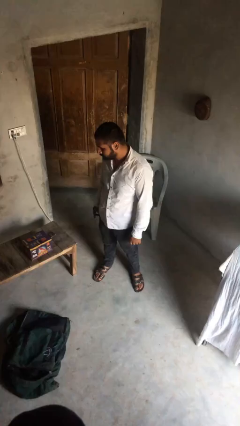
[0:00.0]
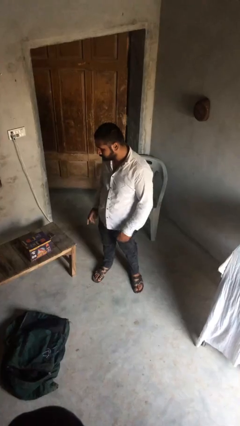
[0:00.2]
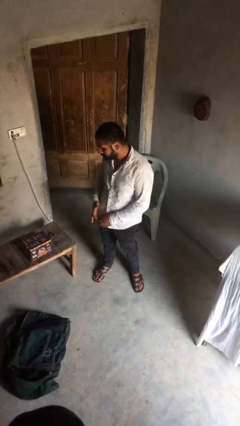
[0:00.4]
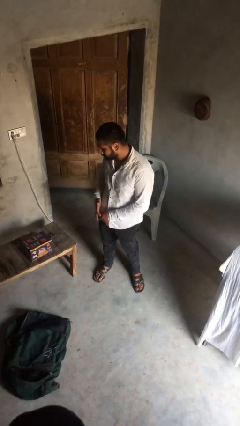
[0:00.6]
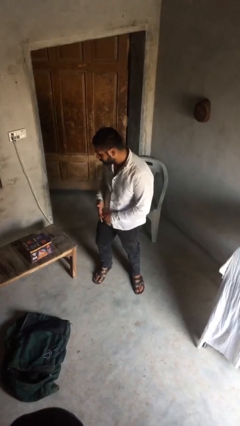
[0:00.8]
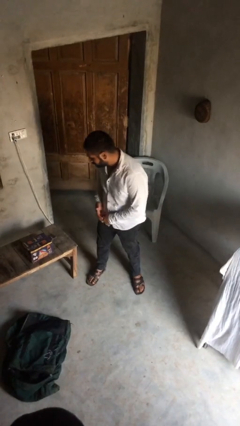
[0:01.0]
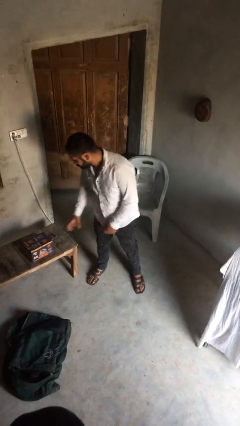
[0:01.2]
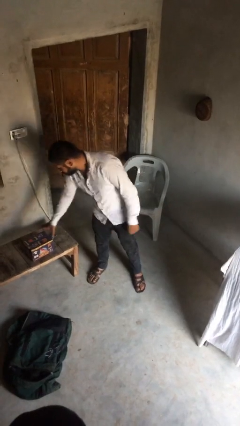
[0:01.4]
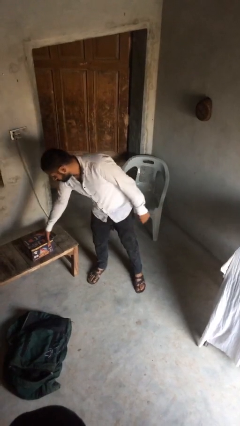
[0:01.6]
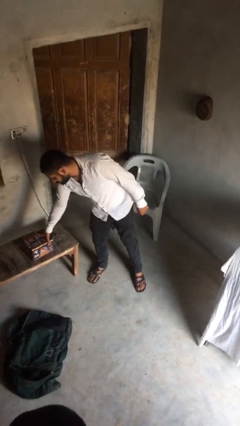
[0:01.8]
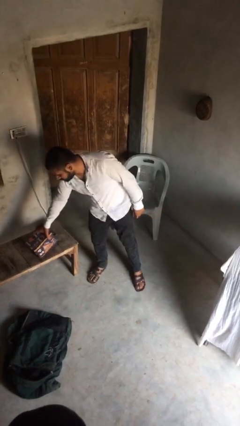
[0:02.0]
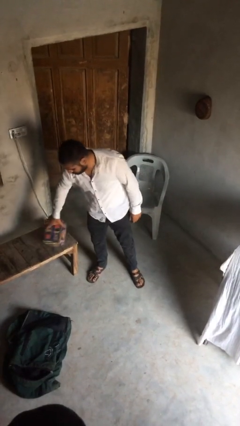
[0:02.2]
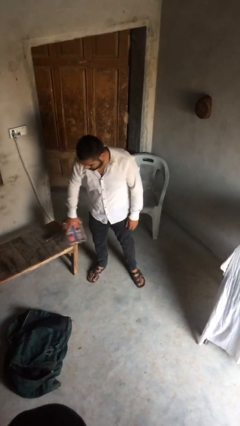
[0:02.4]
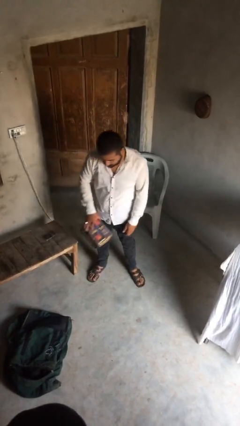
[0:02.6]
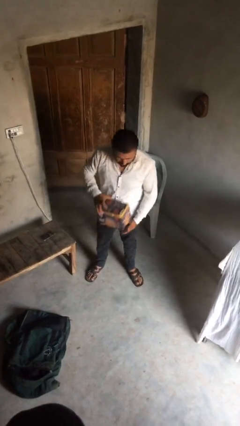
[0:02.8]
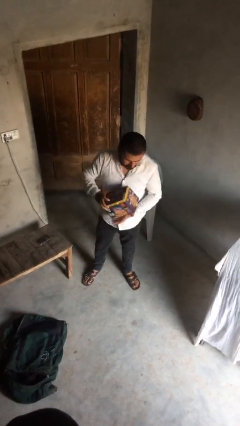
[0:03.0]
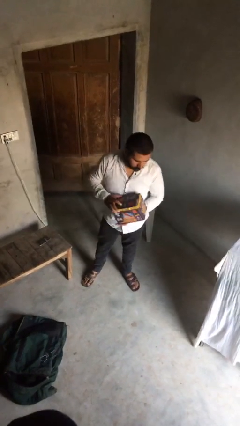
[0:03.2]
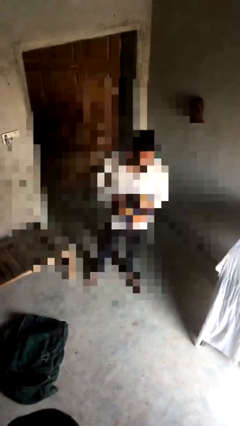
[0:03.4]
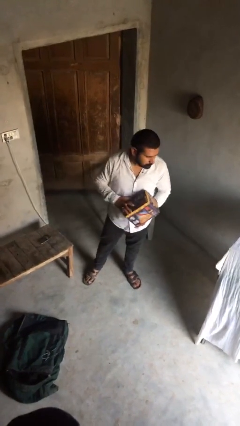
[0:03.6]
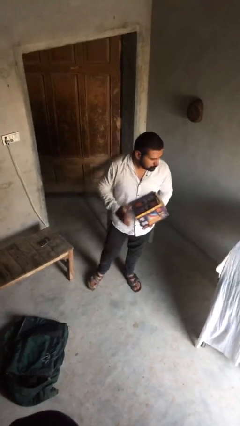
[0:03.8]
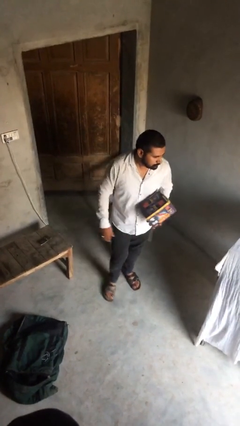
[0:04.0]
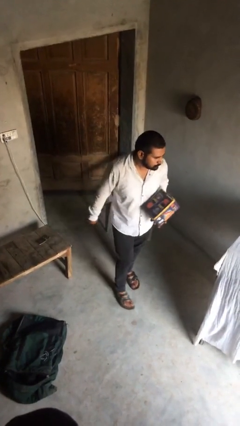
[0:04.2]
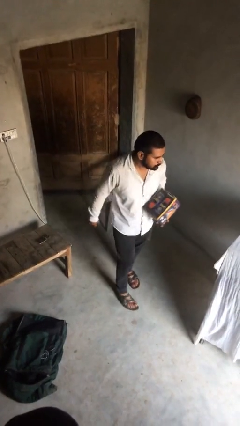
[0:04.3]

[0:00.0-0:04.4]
person picks up object from table

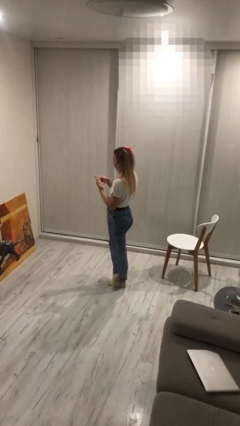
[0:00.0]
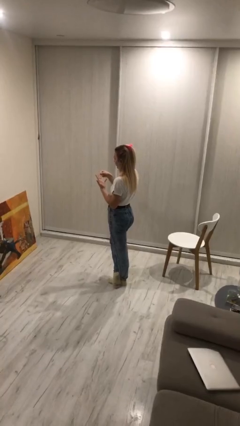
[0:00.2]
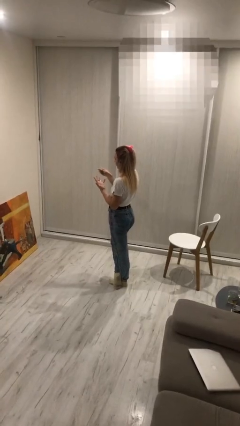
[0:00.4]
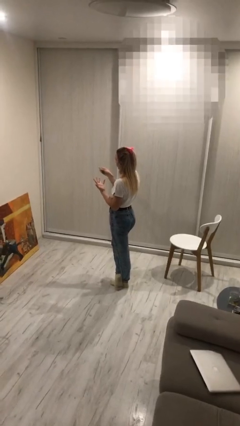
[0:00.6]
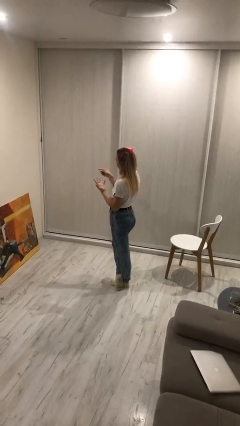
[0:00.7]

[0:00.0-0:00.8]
person takes off ring

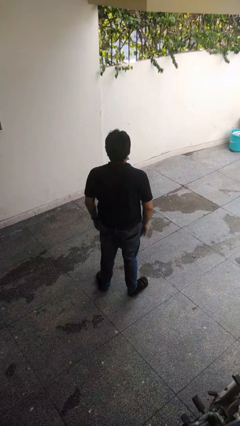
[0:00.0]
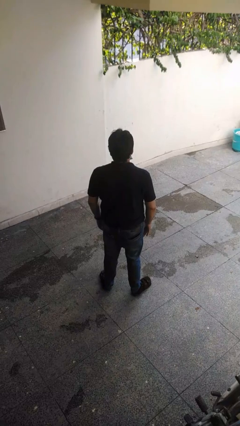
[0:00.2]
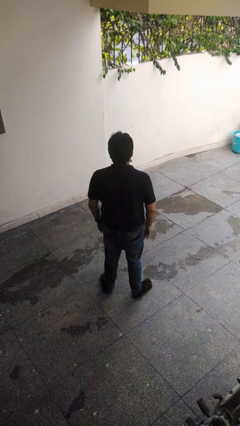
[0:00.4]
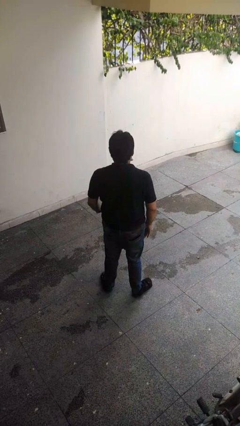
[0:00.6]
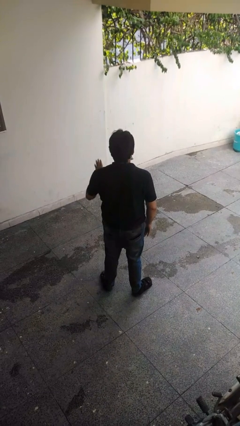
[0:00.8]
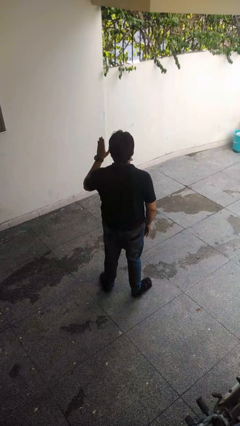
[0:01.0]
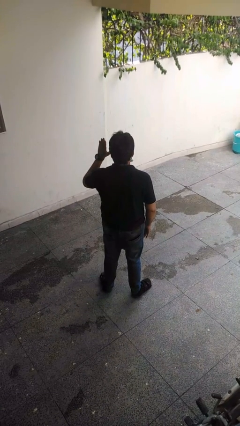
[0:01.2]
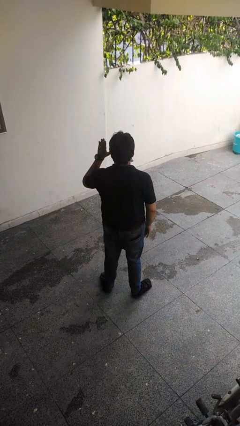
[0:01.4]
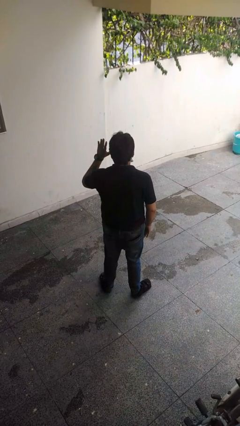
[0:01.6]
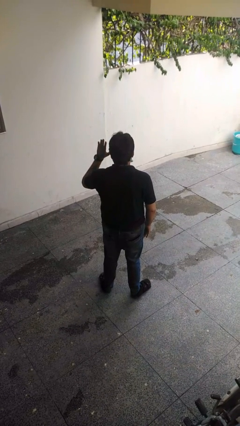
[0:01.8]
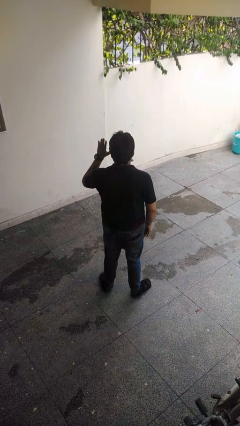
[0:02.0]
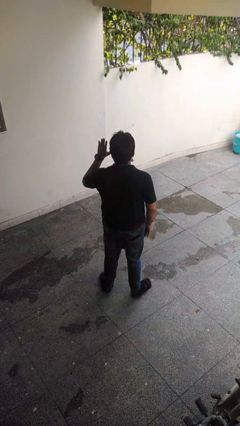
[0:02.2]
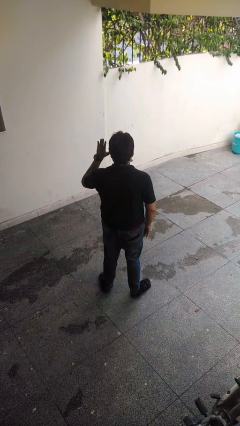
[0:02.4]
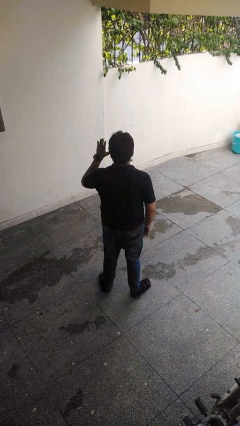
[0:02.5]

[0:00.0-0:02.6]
person gestures number five

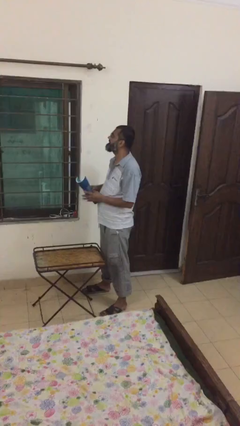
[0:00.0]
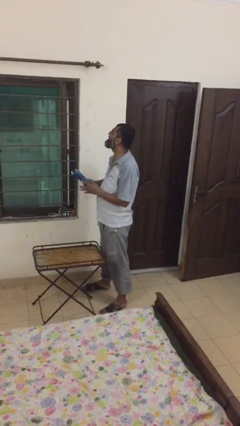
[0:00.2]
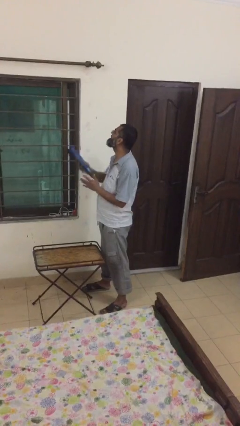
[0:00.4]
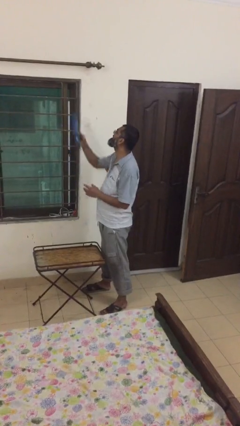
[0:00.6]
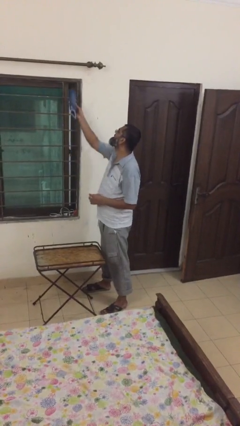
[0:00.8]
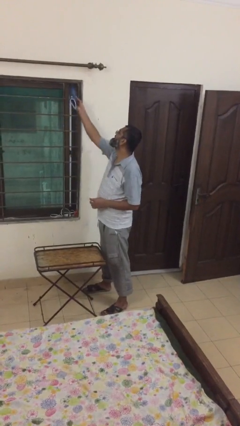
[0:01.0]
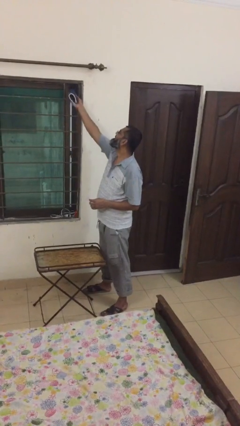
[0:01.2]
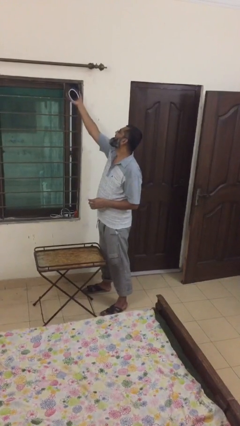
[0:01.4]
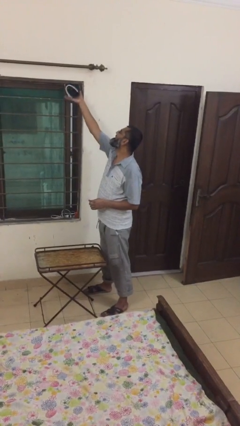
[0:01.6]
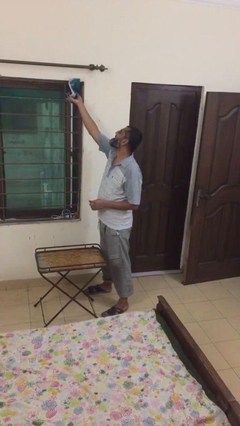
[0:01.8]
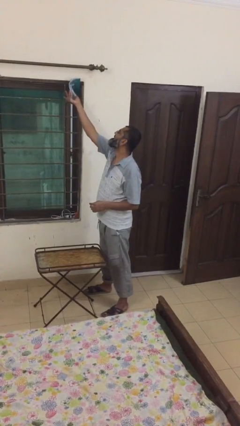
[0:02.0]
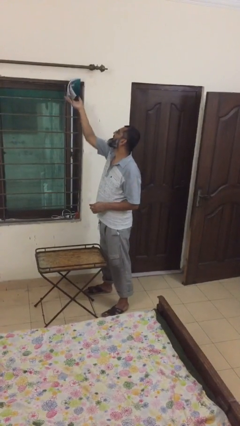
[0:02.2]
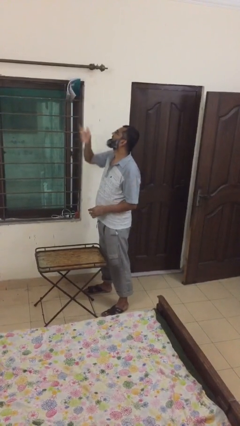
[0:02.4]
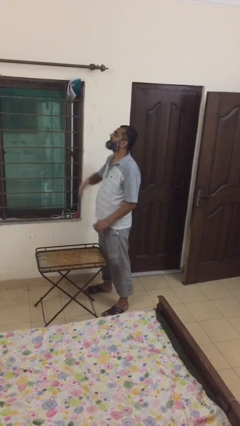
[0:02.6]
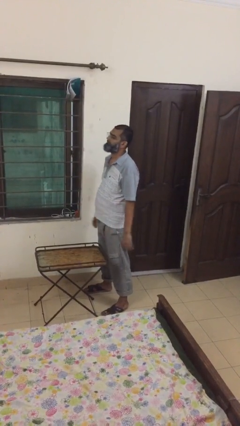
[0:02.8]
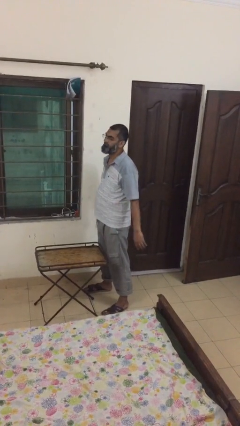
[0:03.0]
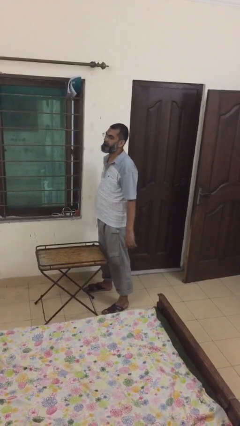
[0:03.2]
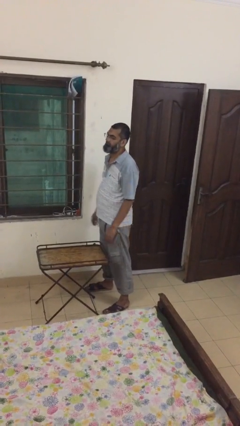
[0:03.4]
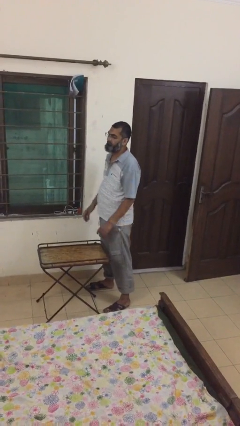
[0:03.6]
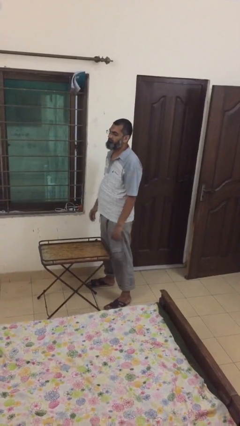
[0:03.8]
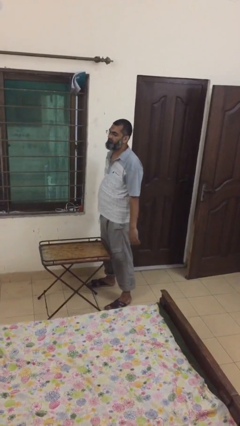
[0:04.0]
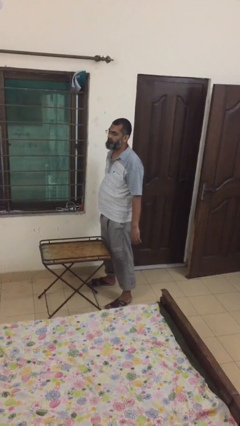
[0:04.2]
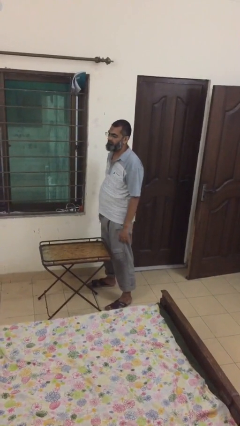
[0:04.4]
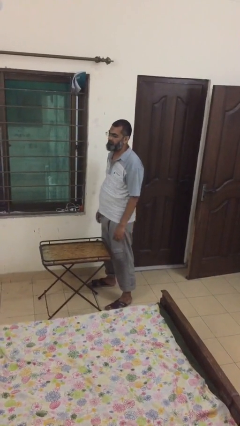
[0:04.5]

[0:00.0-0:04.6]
person puts down object on shelf

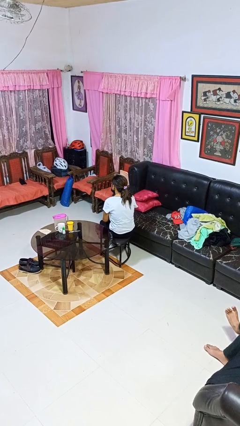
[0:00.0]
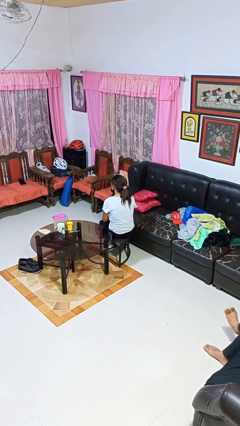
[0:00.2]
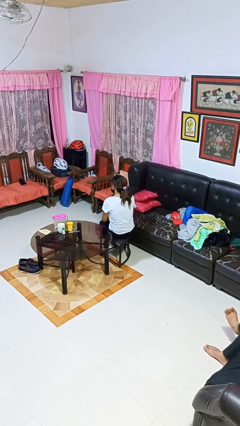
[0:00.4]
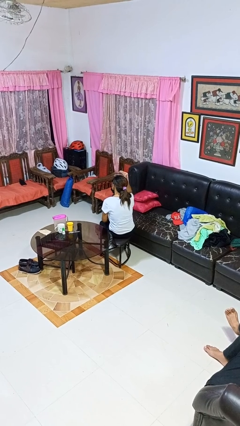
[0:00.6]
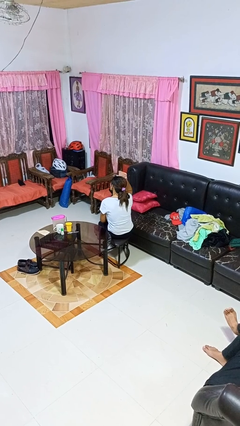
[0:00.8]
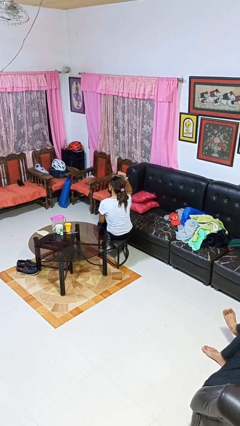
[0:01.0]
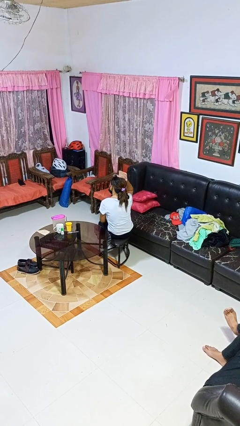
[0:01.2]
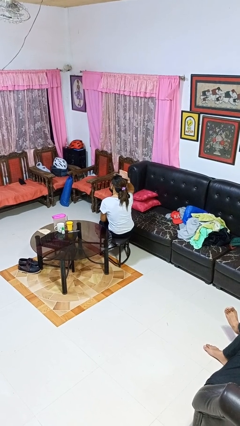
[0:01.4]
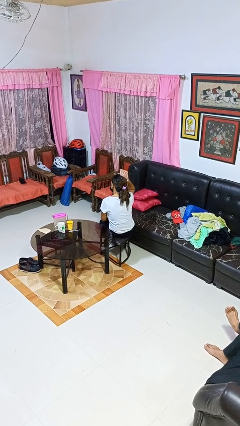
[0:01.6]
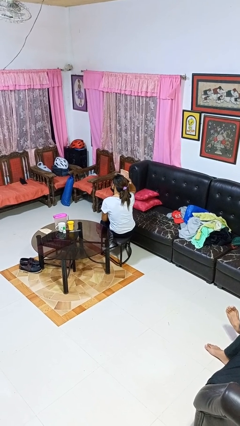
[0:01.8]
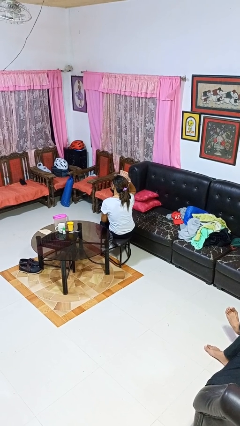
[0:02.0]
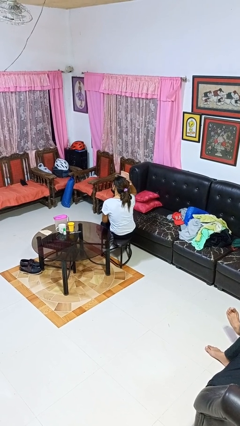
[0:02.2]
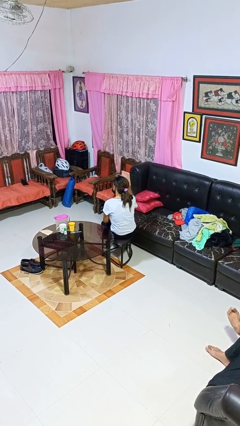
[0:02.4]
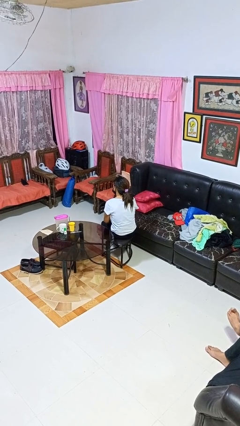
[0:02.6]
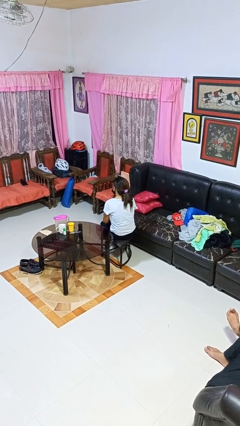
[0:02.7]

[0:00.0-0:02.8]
person pats head

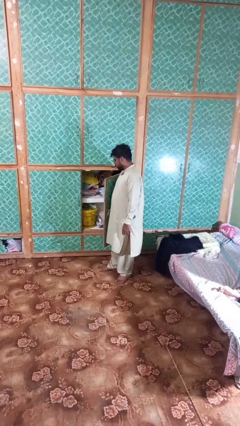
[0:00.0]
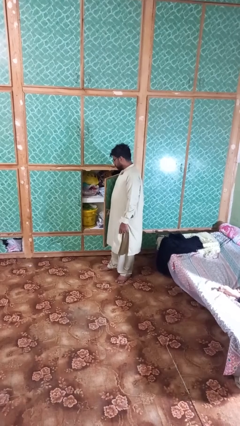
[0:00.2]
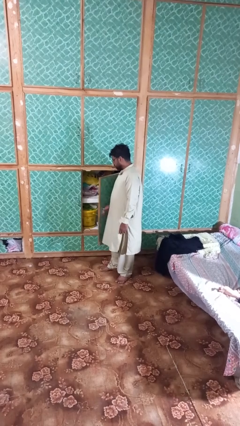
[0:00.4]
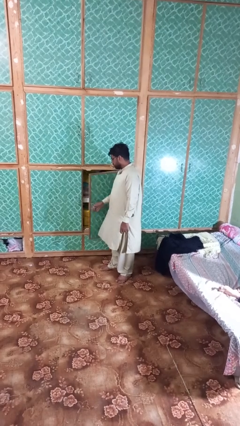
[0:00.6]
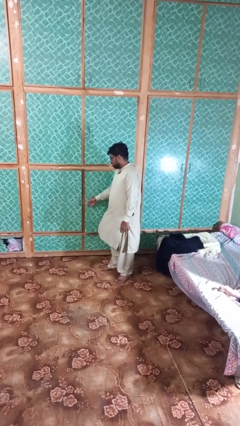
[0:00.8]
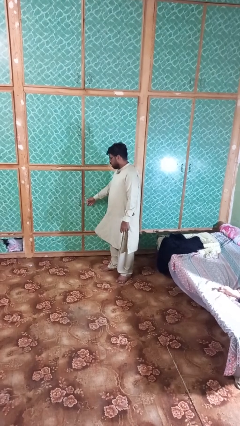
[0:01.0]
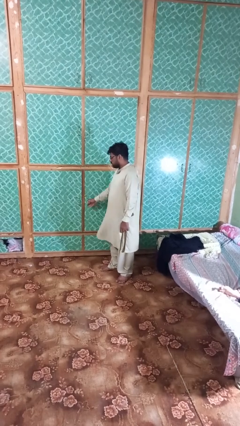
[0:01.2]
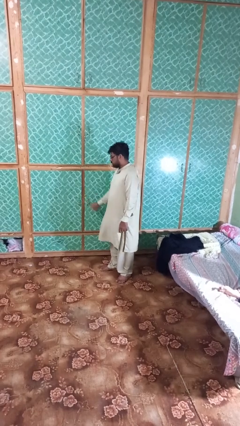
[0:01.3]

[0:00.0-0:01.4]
person closes closet door

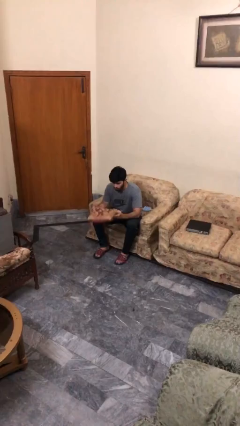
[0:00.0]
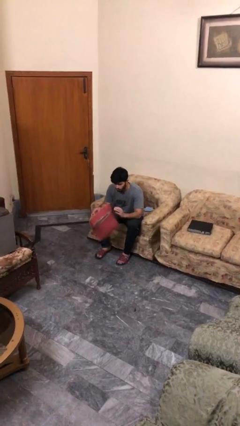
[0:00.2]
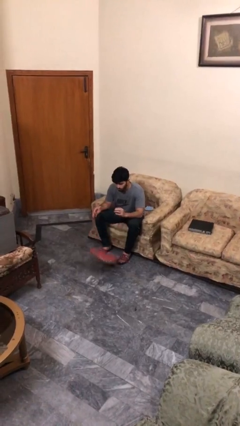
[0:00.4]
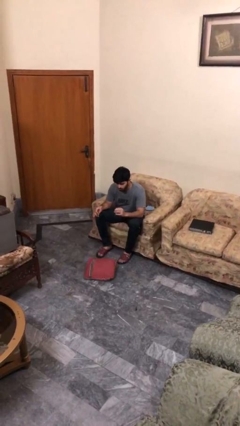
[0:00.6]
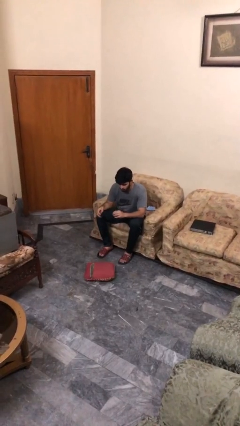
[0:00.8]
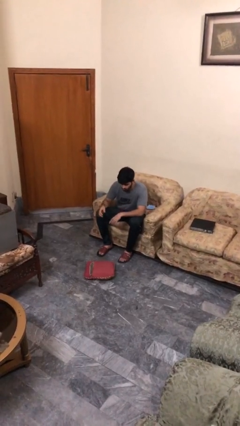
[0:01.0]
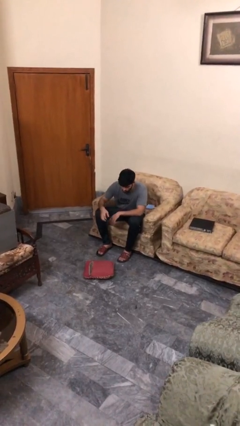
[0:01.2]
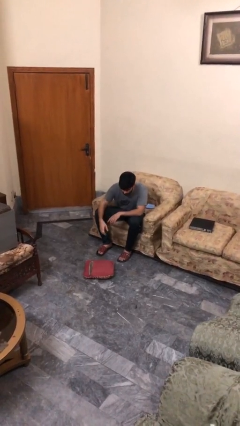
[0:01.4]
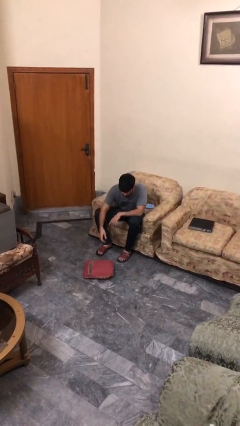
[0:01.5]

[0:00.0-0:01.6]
person drops object
